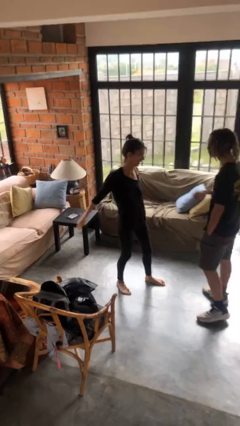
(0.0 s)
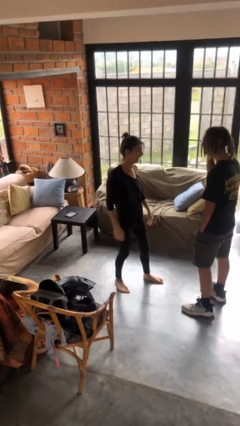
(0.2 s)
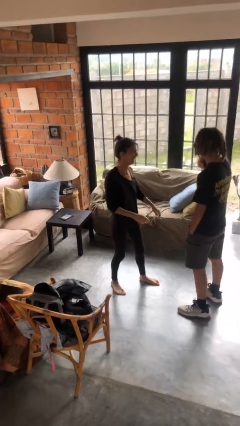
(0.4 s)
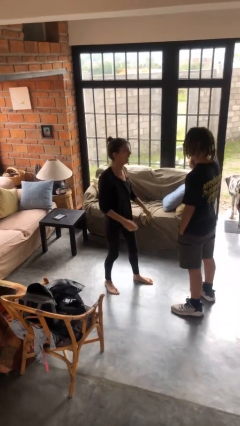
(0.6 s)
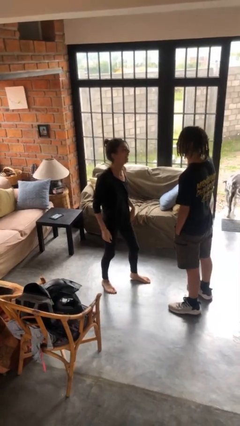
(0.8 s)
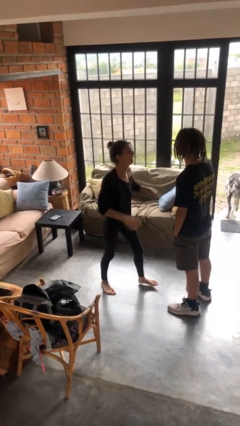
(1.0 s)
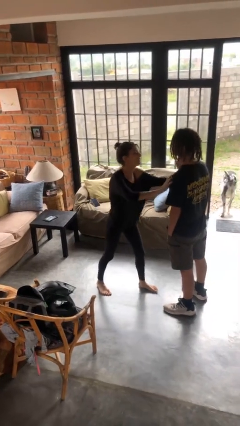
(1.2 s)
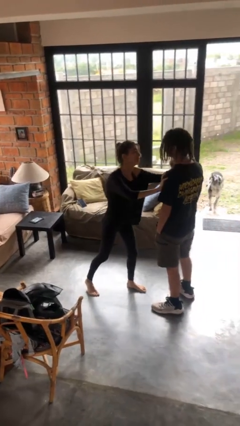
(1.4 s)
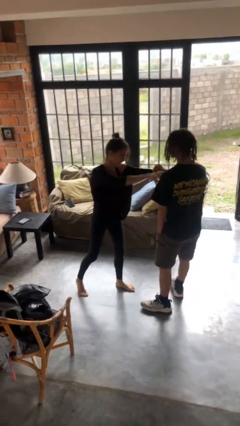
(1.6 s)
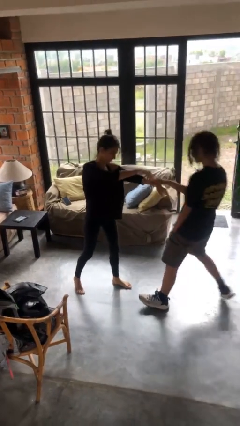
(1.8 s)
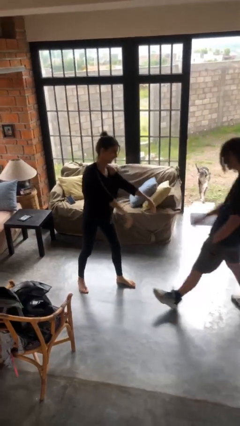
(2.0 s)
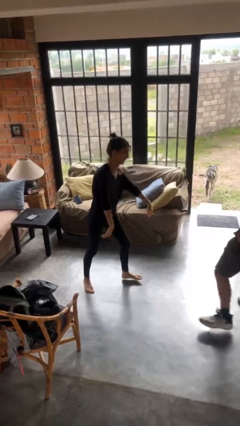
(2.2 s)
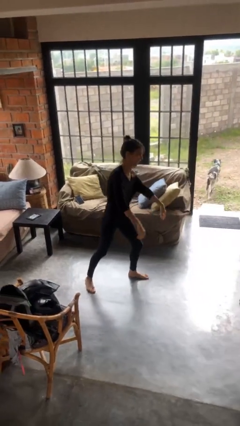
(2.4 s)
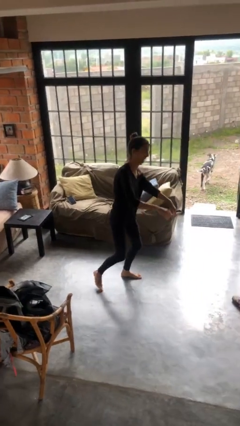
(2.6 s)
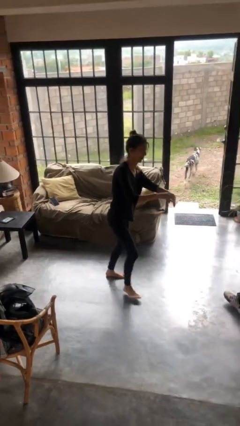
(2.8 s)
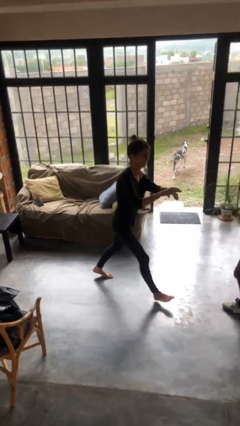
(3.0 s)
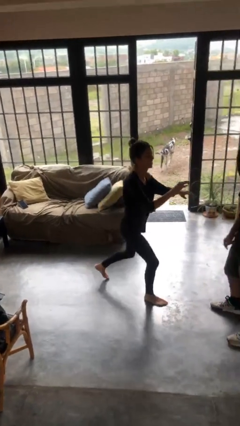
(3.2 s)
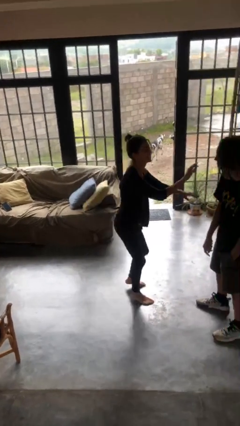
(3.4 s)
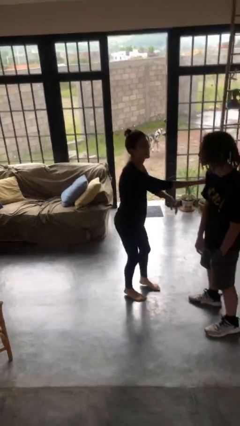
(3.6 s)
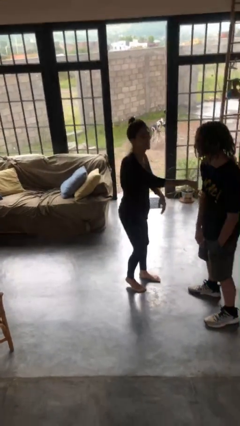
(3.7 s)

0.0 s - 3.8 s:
person shoves person

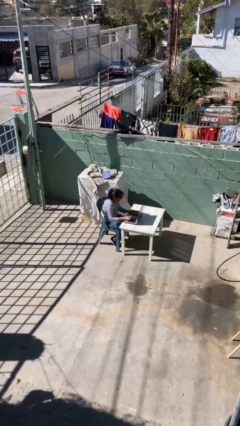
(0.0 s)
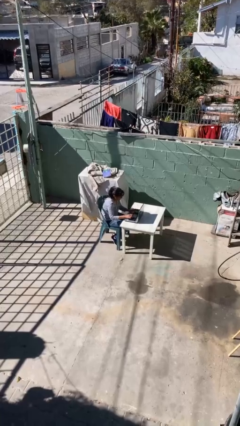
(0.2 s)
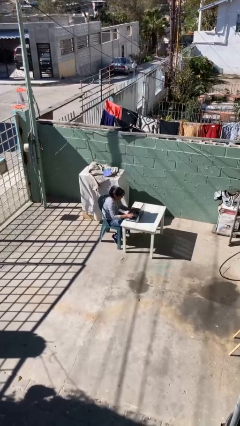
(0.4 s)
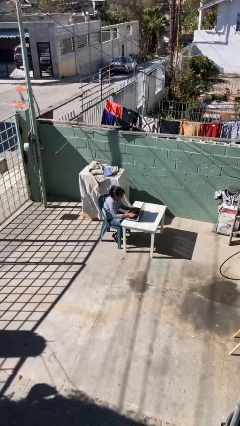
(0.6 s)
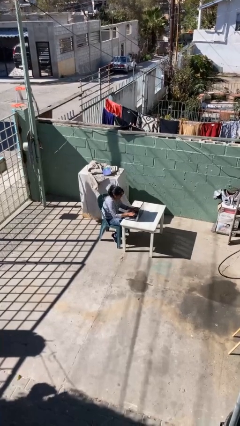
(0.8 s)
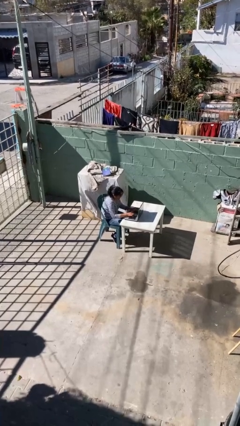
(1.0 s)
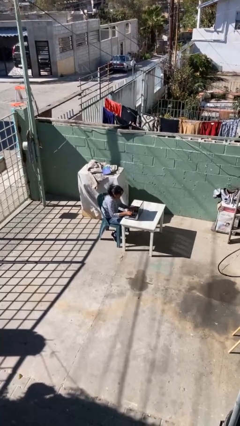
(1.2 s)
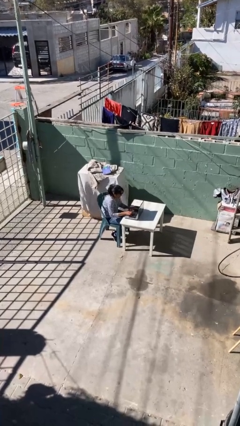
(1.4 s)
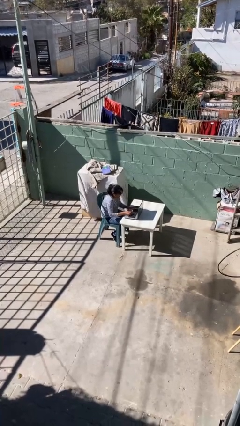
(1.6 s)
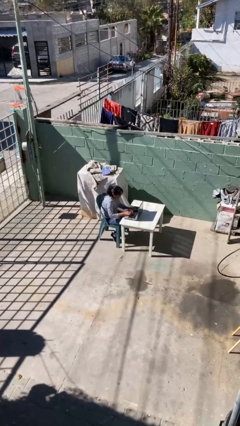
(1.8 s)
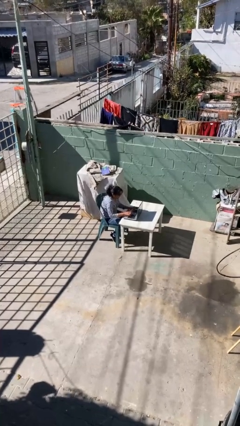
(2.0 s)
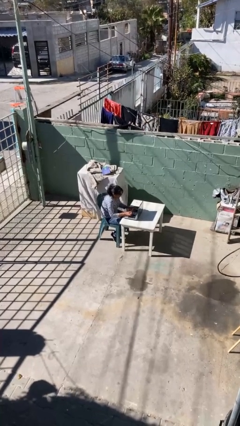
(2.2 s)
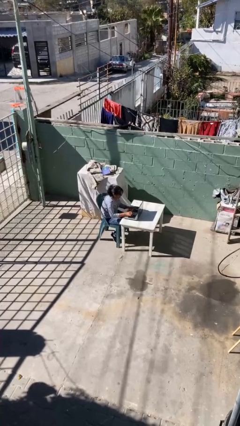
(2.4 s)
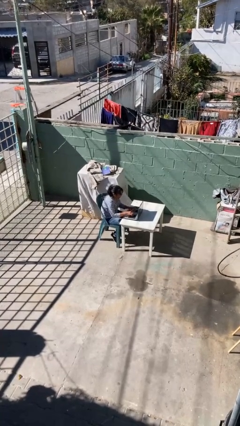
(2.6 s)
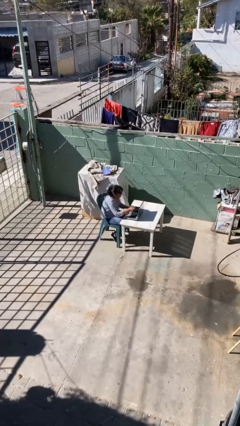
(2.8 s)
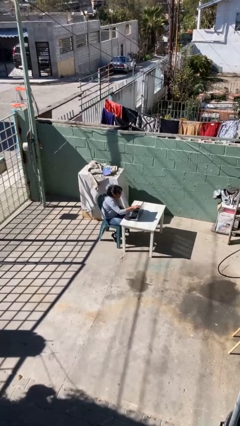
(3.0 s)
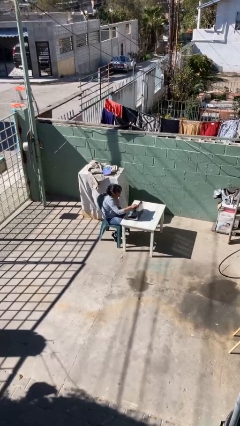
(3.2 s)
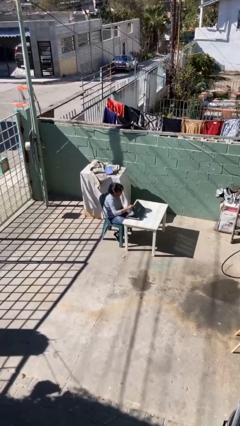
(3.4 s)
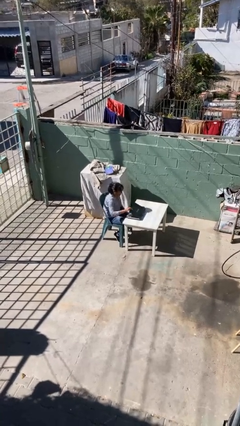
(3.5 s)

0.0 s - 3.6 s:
person interacts with laptop

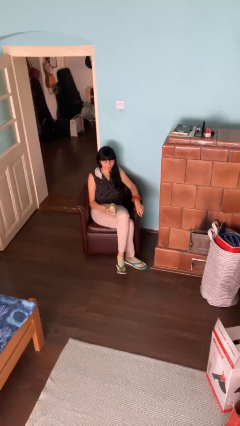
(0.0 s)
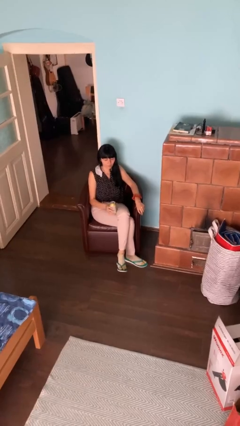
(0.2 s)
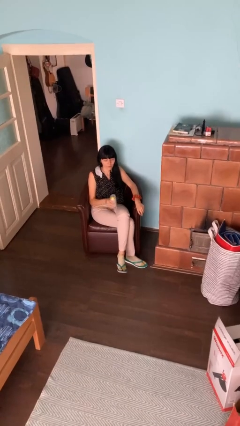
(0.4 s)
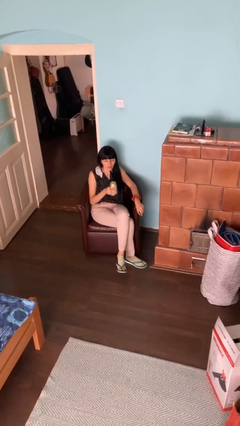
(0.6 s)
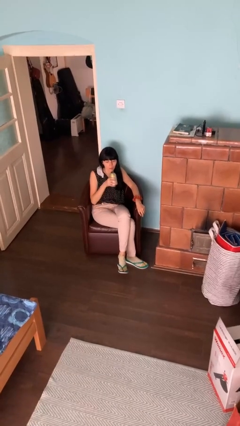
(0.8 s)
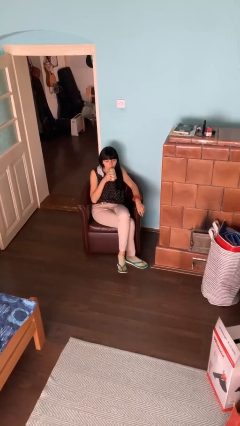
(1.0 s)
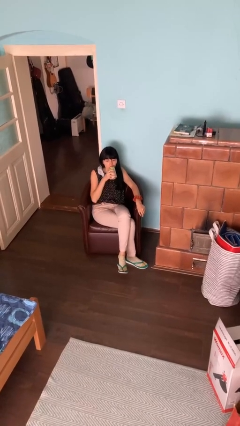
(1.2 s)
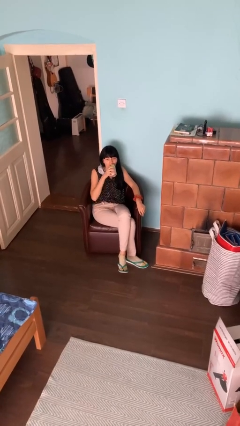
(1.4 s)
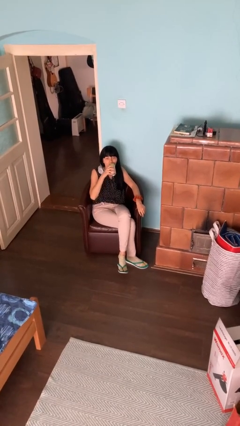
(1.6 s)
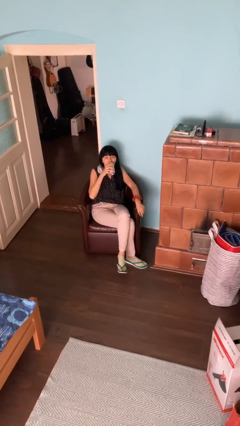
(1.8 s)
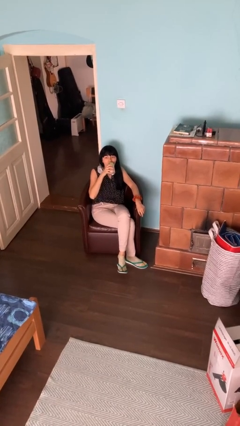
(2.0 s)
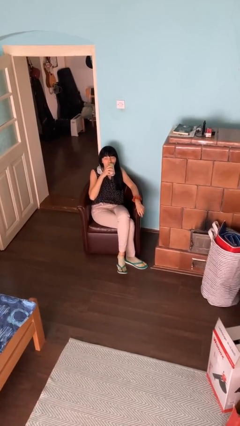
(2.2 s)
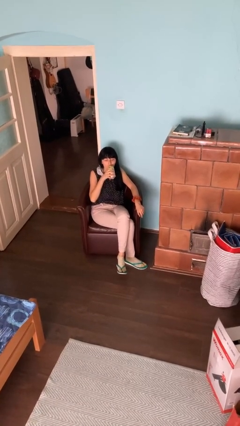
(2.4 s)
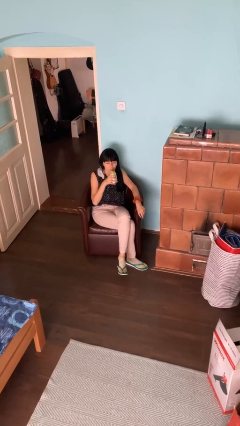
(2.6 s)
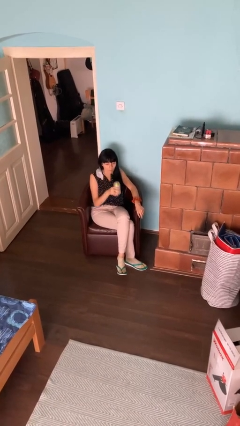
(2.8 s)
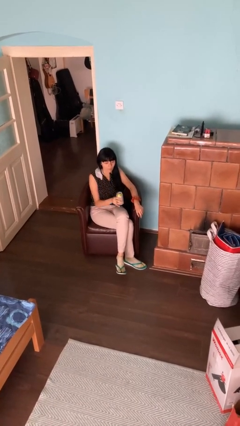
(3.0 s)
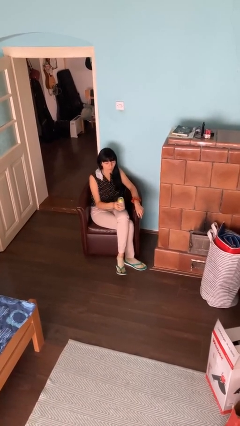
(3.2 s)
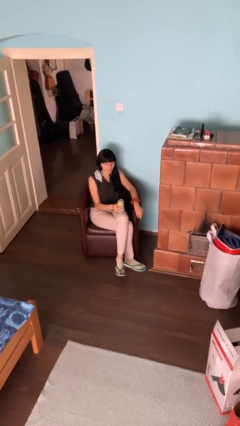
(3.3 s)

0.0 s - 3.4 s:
person drinks from beverage can

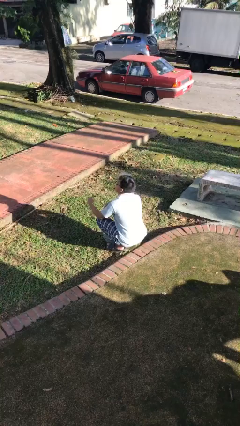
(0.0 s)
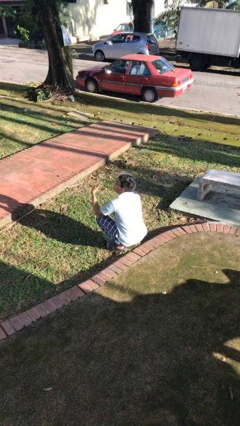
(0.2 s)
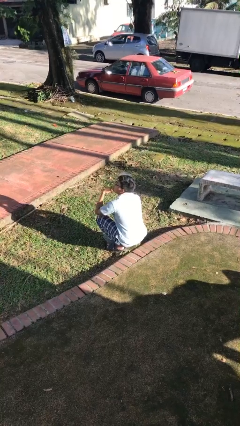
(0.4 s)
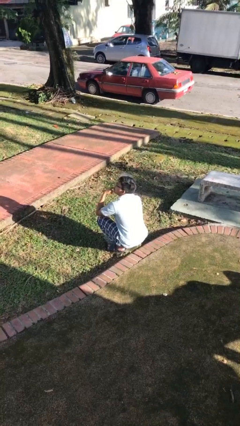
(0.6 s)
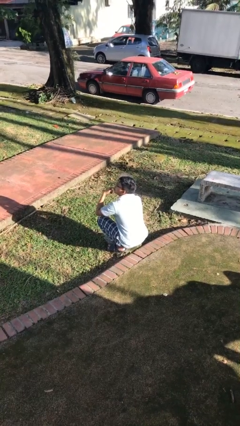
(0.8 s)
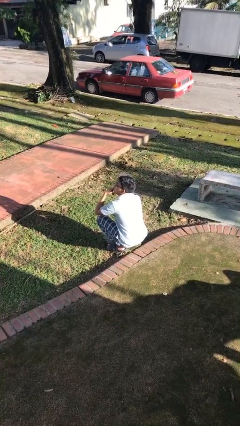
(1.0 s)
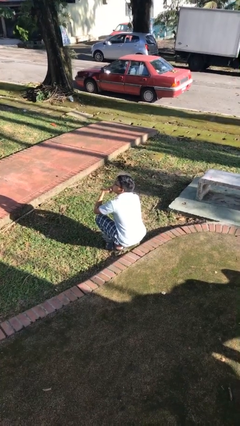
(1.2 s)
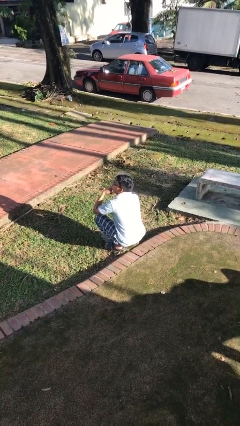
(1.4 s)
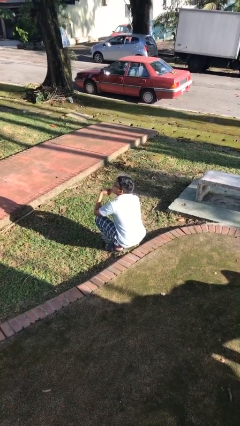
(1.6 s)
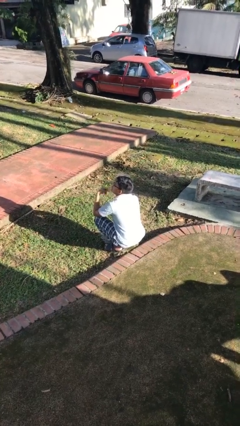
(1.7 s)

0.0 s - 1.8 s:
person strokes chin

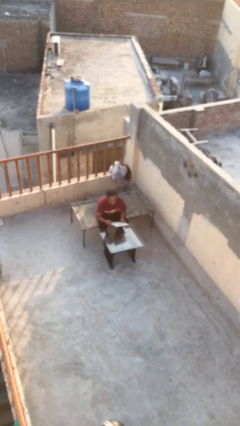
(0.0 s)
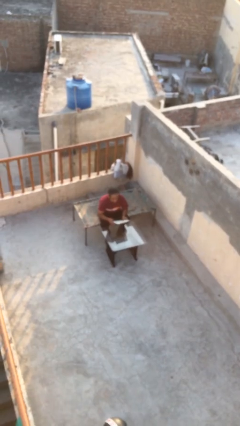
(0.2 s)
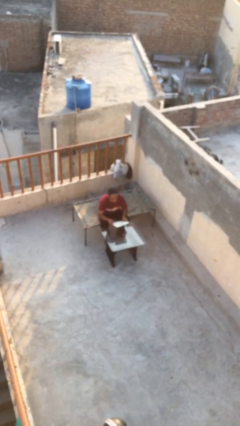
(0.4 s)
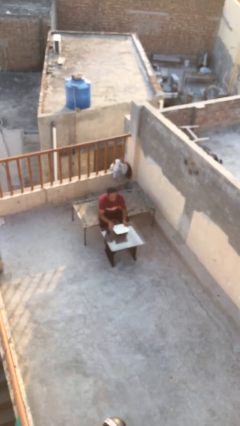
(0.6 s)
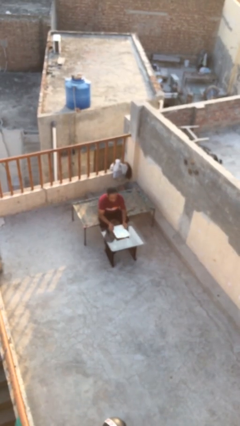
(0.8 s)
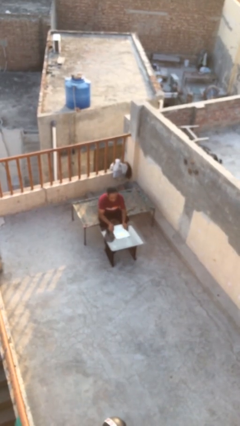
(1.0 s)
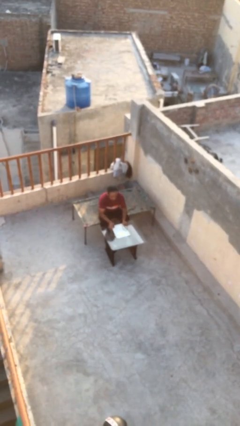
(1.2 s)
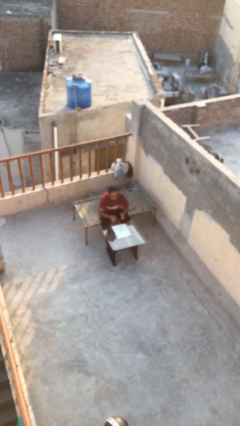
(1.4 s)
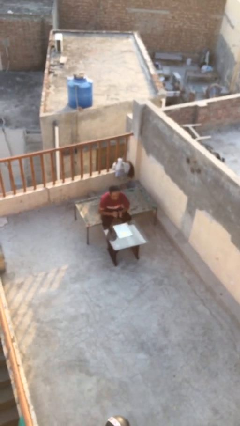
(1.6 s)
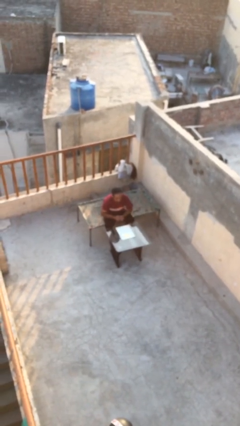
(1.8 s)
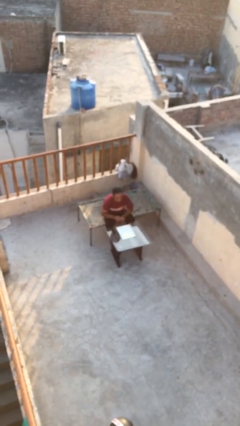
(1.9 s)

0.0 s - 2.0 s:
person puts down object on table

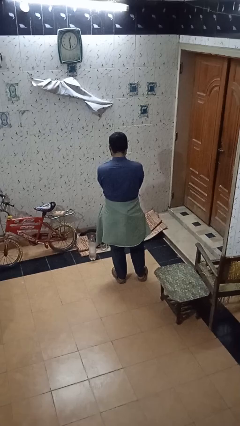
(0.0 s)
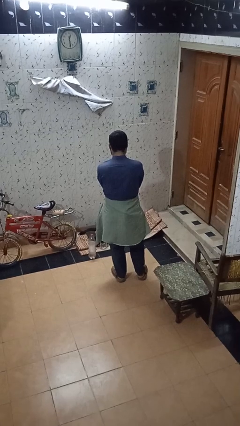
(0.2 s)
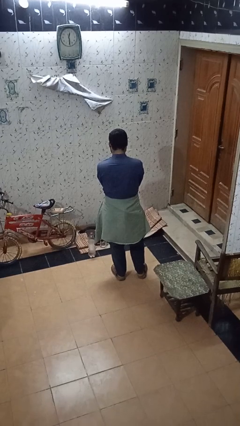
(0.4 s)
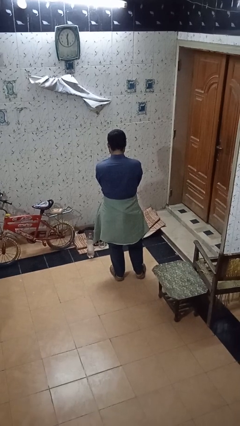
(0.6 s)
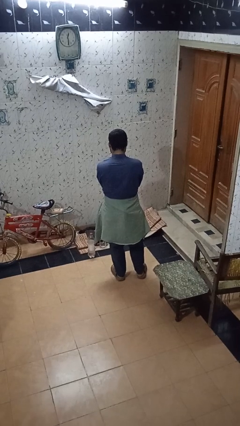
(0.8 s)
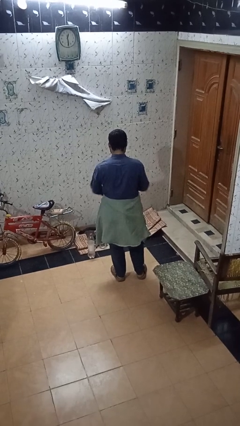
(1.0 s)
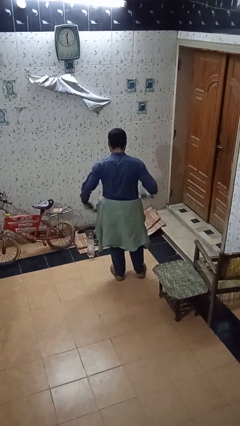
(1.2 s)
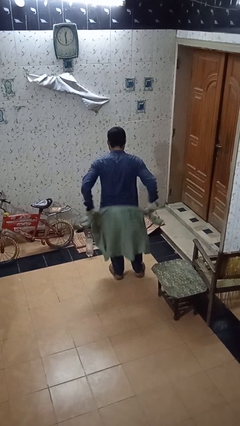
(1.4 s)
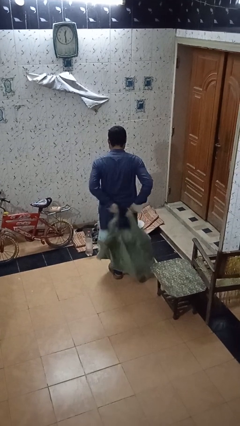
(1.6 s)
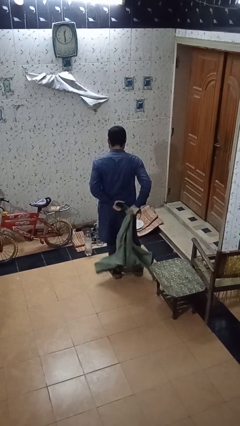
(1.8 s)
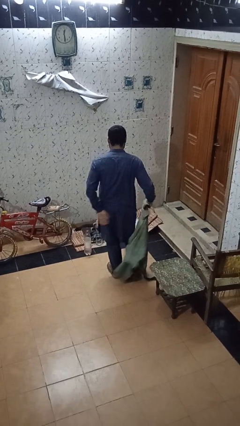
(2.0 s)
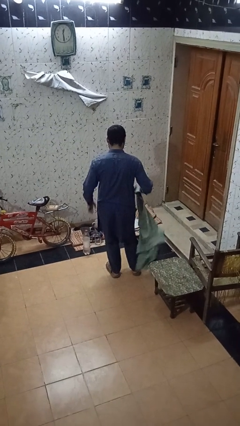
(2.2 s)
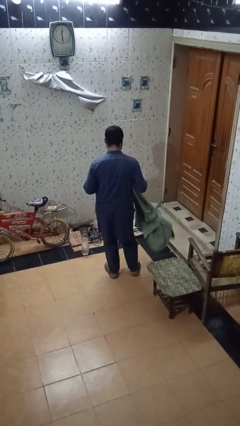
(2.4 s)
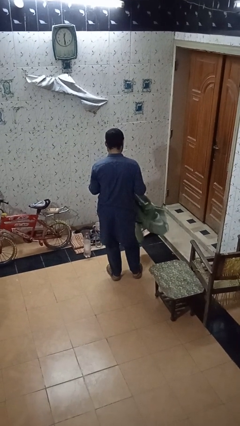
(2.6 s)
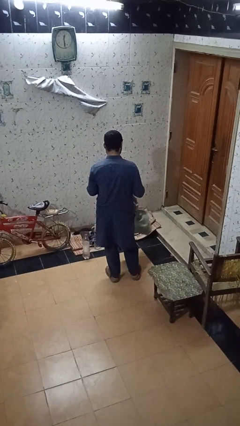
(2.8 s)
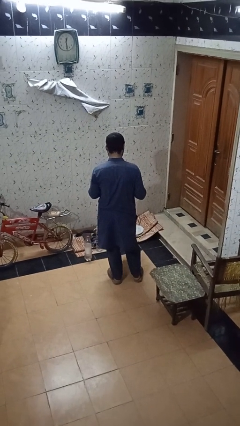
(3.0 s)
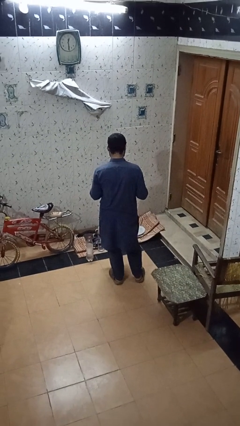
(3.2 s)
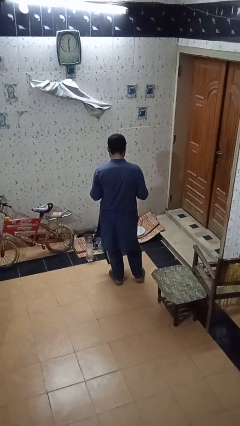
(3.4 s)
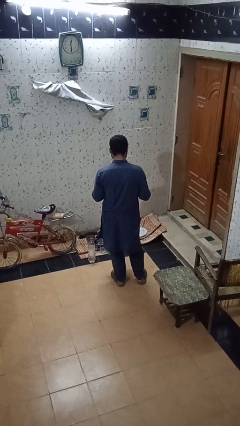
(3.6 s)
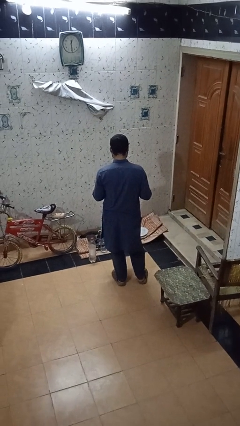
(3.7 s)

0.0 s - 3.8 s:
person unties jacket around waist
